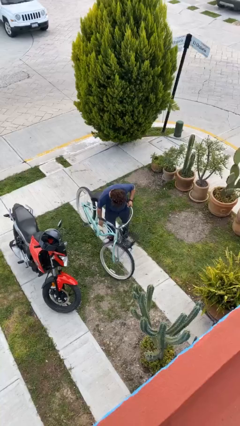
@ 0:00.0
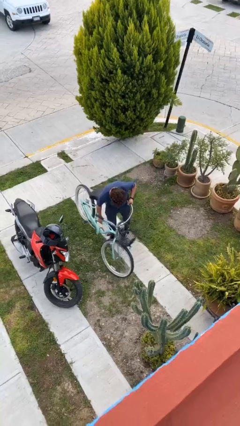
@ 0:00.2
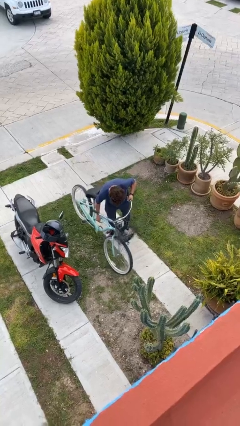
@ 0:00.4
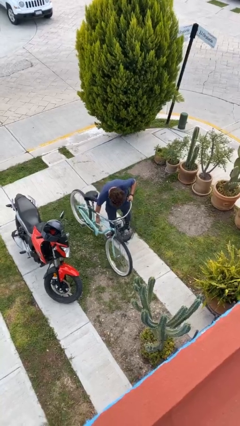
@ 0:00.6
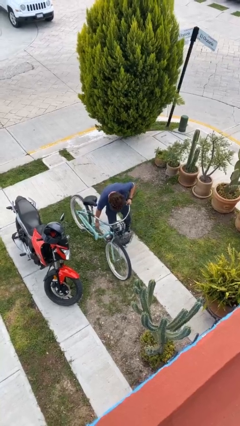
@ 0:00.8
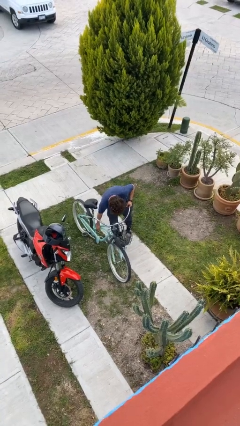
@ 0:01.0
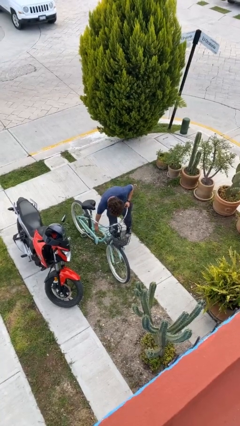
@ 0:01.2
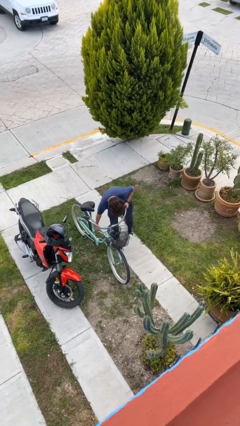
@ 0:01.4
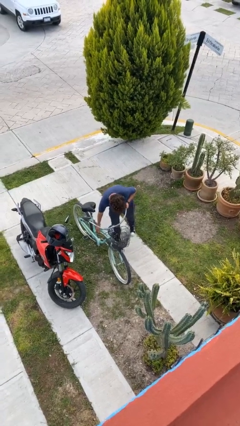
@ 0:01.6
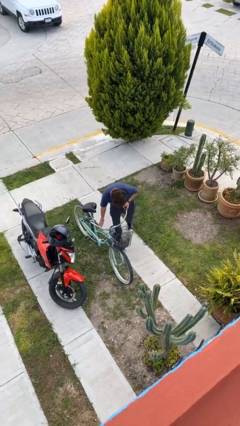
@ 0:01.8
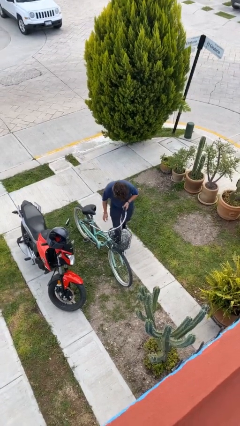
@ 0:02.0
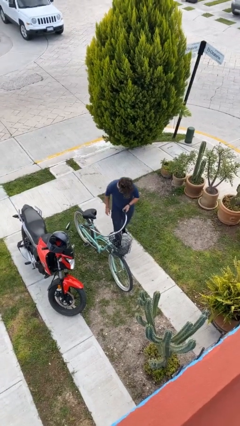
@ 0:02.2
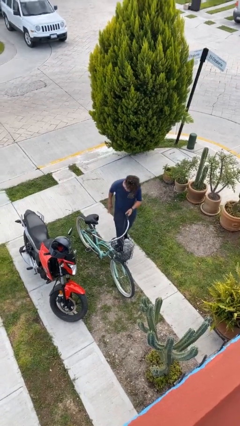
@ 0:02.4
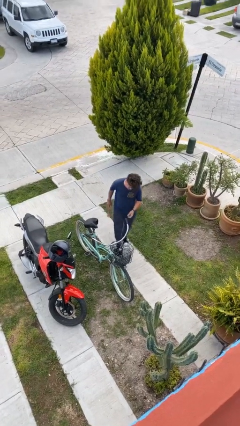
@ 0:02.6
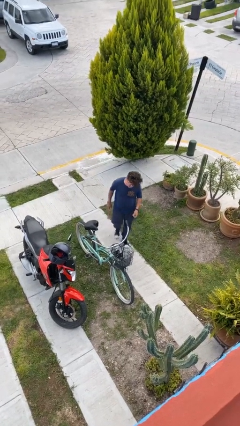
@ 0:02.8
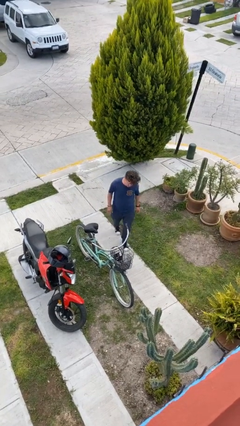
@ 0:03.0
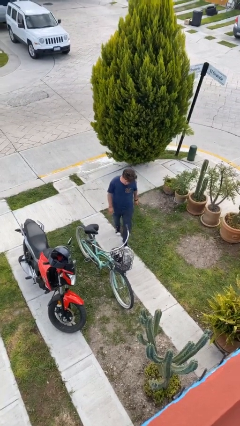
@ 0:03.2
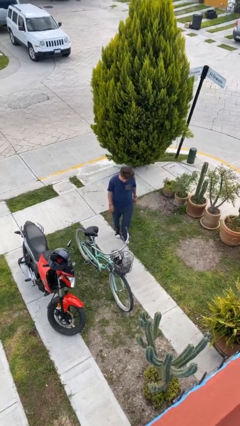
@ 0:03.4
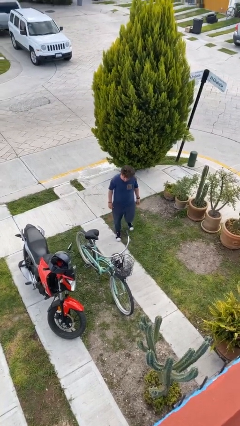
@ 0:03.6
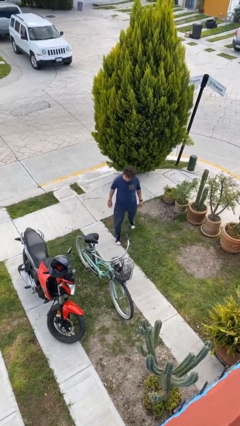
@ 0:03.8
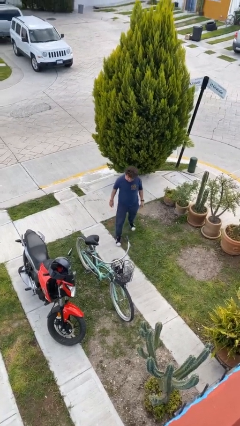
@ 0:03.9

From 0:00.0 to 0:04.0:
person puts down object on floor

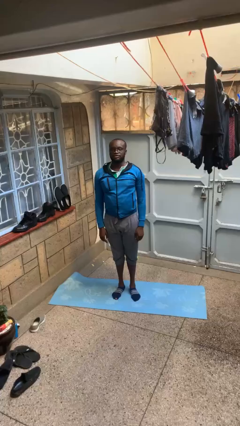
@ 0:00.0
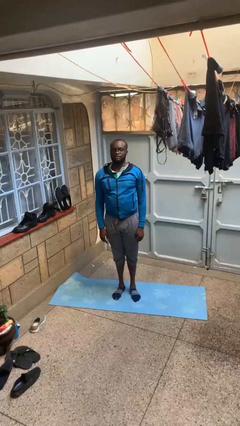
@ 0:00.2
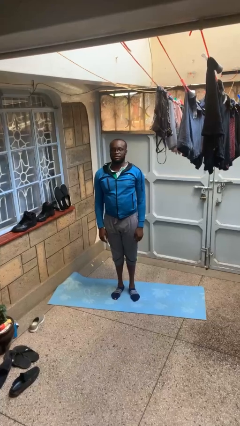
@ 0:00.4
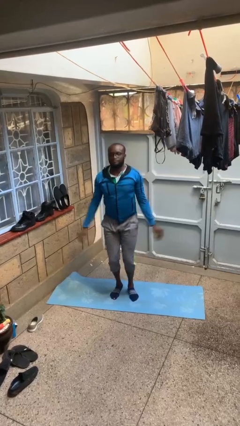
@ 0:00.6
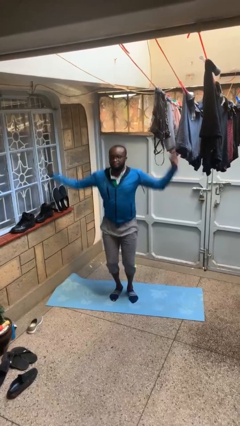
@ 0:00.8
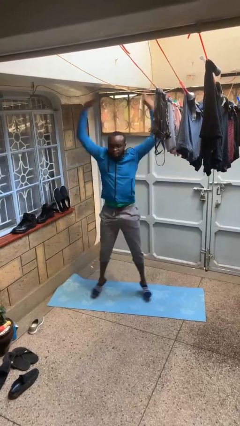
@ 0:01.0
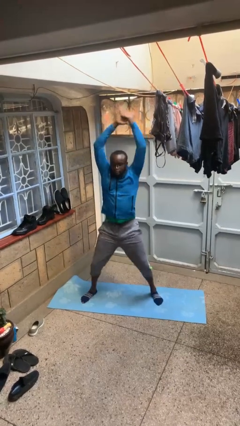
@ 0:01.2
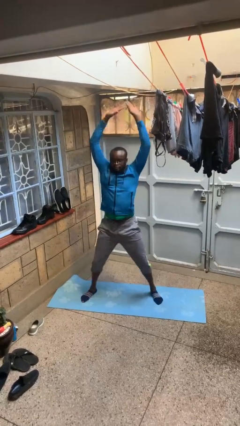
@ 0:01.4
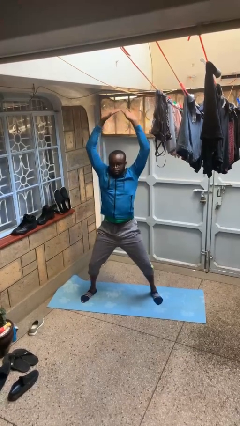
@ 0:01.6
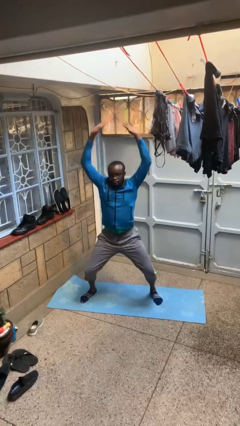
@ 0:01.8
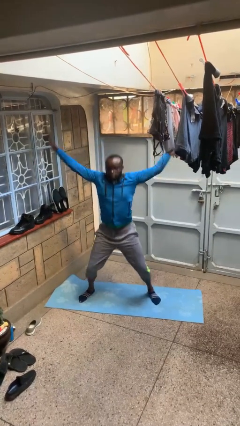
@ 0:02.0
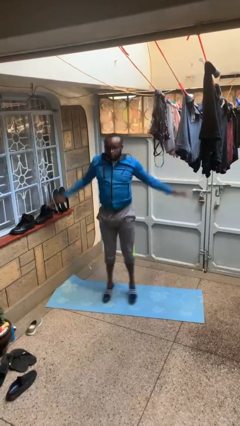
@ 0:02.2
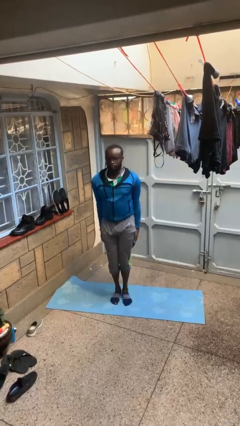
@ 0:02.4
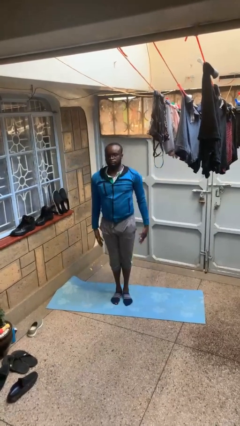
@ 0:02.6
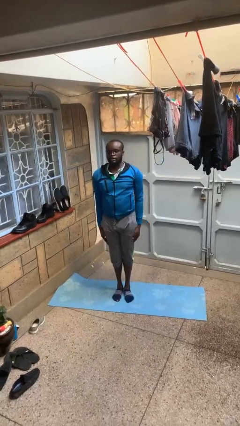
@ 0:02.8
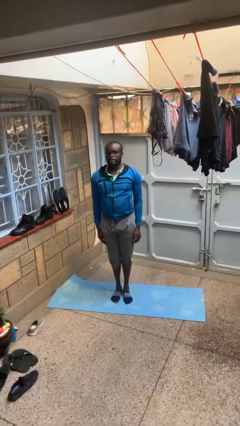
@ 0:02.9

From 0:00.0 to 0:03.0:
person exercises with jumping jacks

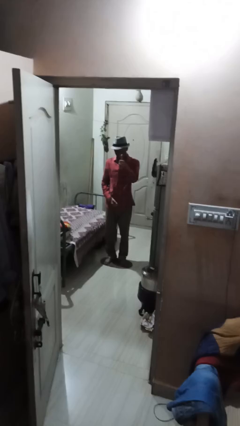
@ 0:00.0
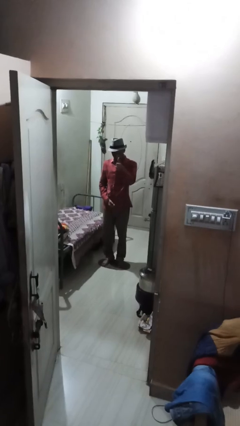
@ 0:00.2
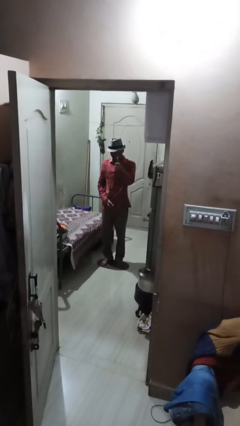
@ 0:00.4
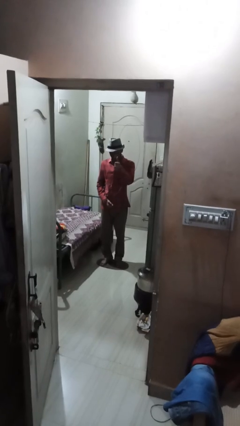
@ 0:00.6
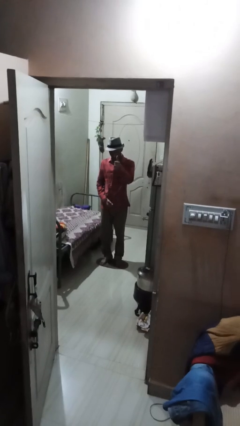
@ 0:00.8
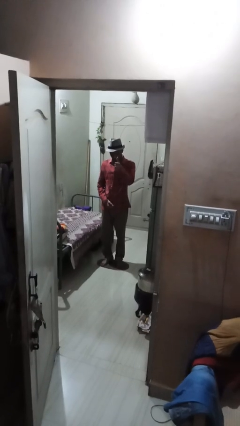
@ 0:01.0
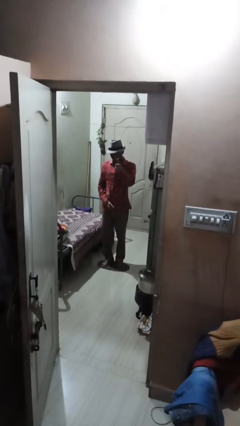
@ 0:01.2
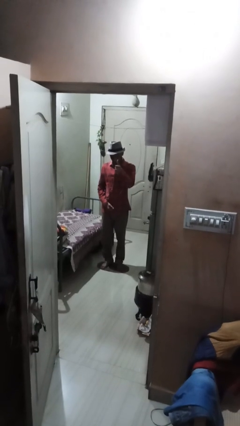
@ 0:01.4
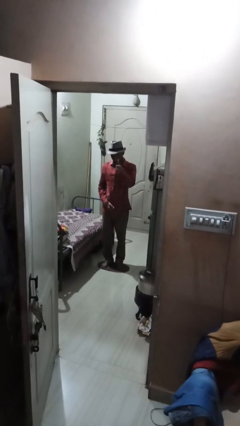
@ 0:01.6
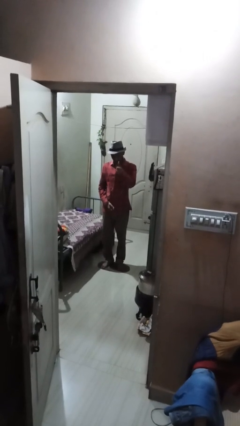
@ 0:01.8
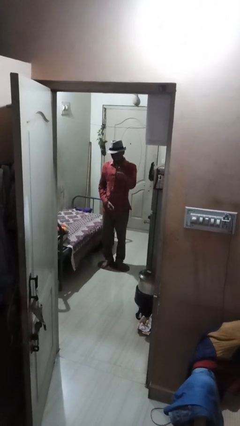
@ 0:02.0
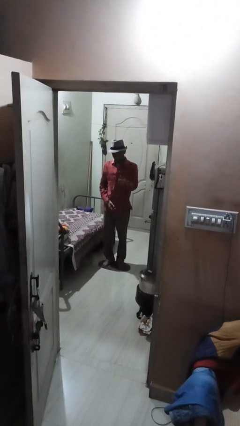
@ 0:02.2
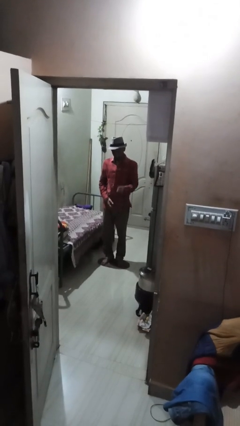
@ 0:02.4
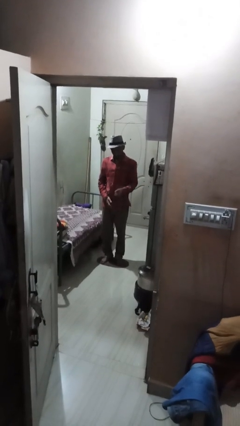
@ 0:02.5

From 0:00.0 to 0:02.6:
person gestures thumbs up

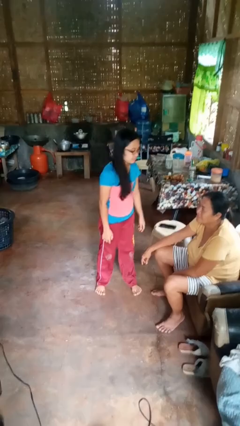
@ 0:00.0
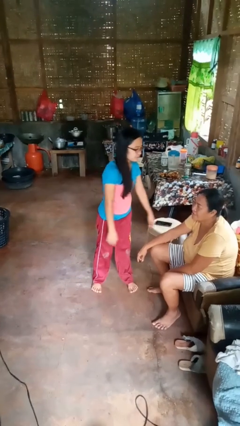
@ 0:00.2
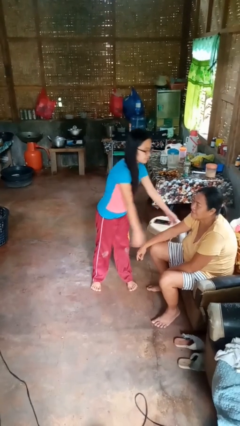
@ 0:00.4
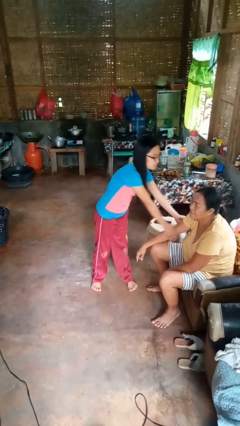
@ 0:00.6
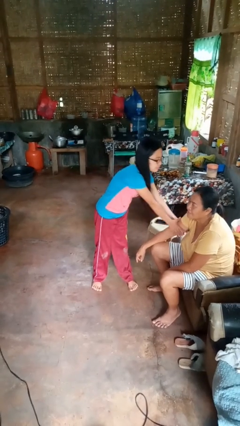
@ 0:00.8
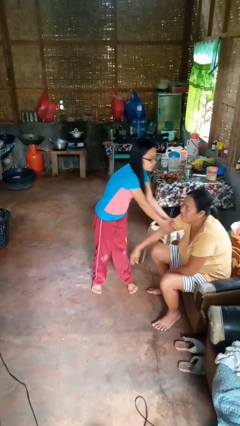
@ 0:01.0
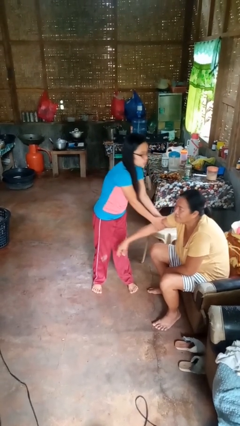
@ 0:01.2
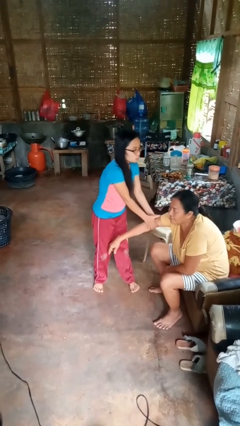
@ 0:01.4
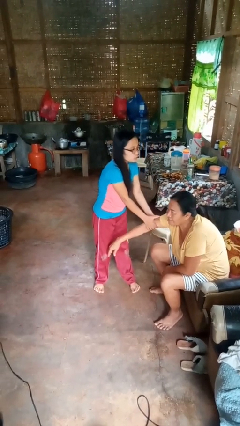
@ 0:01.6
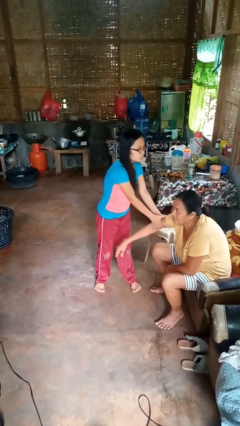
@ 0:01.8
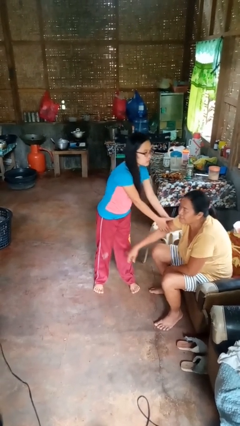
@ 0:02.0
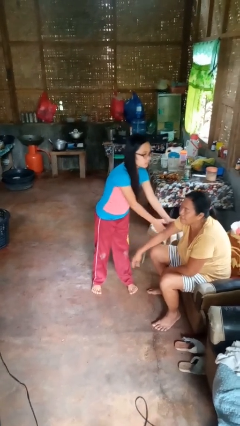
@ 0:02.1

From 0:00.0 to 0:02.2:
person grabs person by bicep

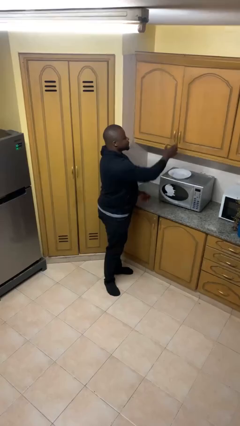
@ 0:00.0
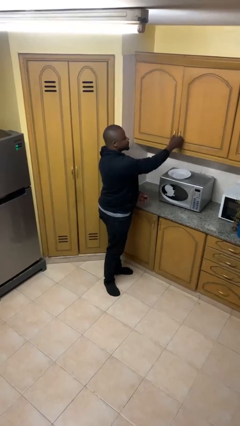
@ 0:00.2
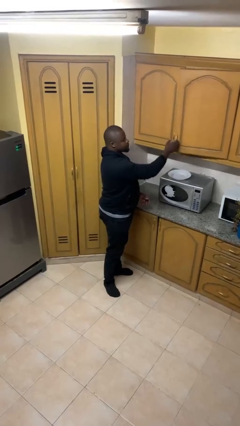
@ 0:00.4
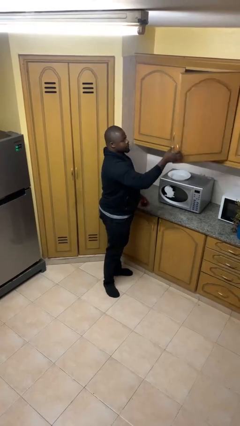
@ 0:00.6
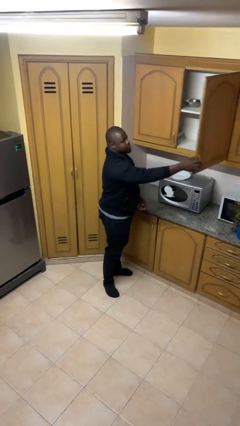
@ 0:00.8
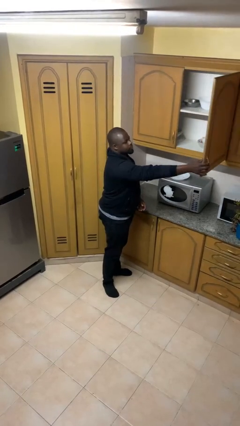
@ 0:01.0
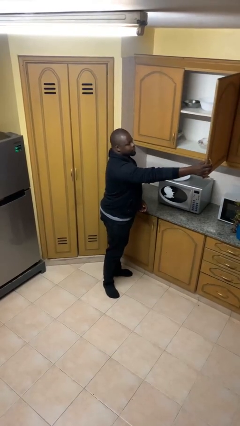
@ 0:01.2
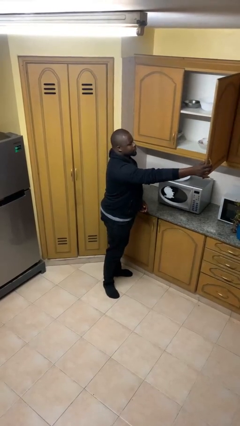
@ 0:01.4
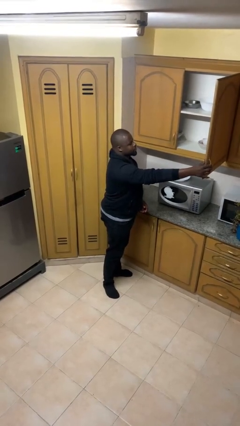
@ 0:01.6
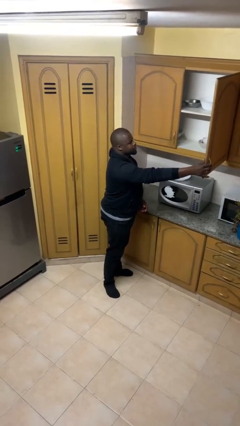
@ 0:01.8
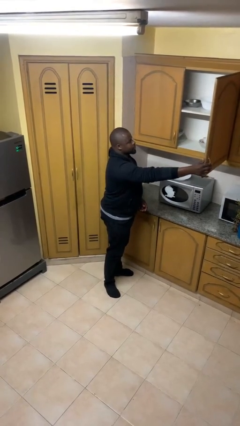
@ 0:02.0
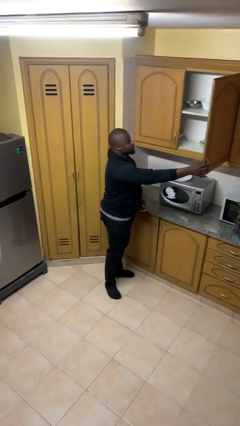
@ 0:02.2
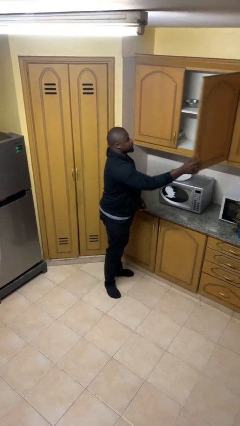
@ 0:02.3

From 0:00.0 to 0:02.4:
person opens cabinet

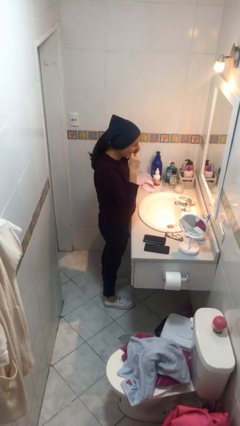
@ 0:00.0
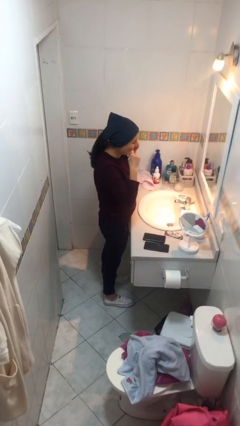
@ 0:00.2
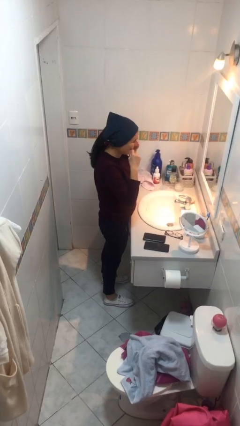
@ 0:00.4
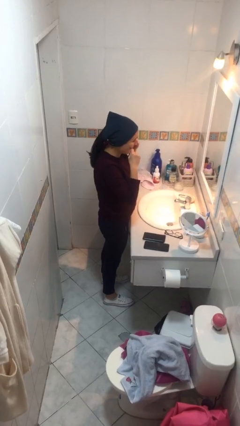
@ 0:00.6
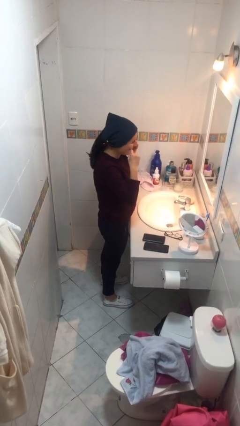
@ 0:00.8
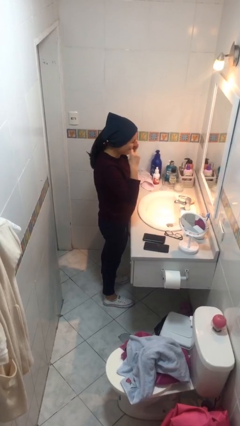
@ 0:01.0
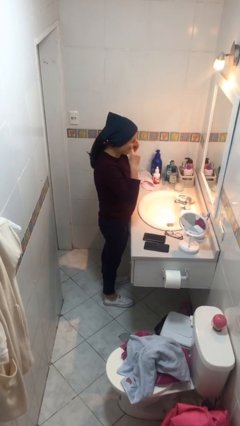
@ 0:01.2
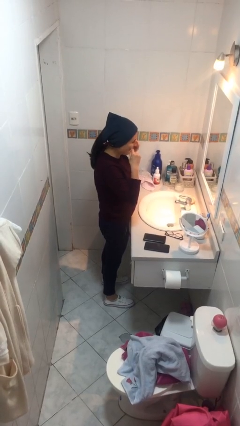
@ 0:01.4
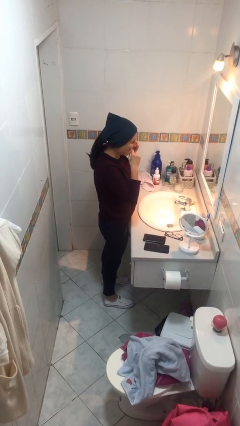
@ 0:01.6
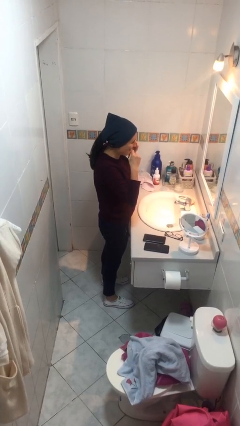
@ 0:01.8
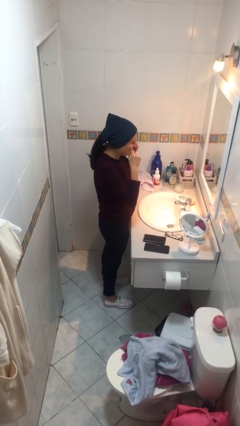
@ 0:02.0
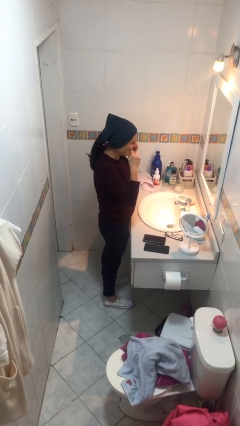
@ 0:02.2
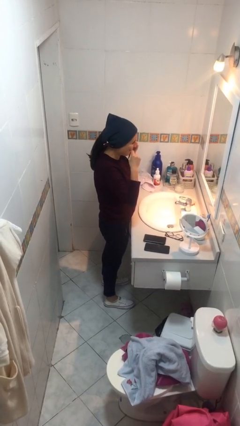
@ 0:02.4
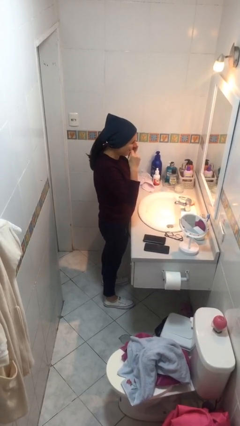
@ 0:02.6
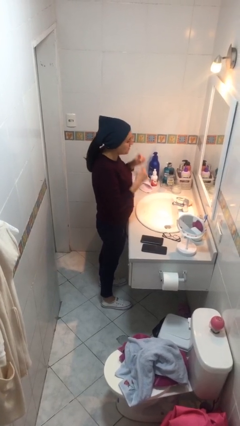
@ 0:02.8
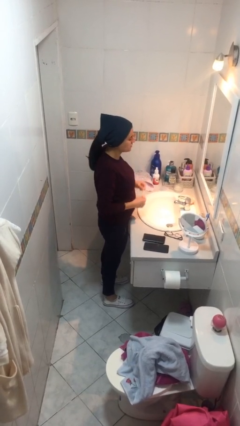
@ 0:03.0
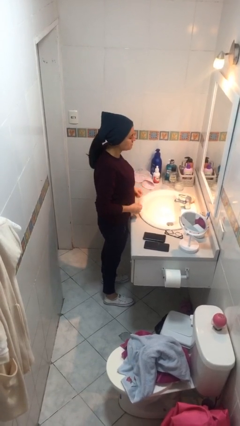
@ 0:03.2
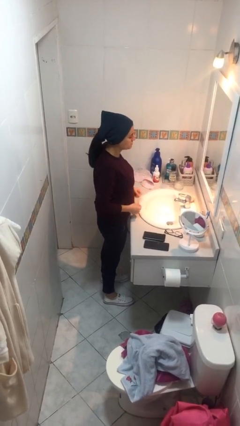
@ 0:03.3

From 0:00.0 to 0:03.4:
person flosses
